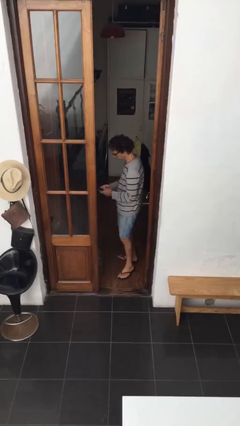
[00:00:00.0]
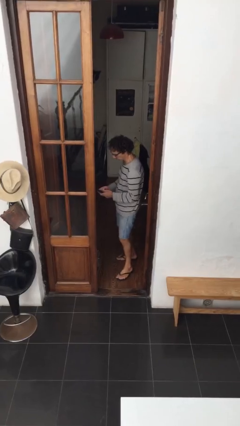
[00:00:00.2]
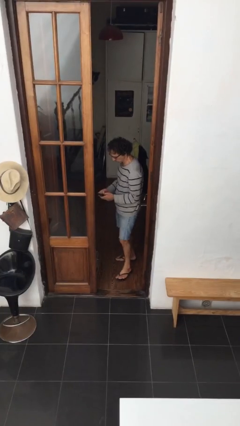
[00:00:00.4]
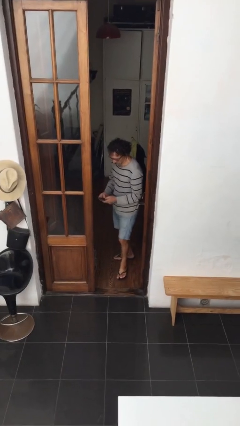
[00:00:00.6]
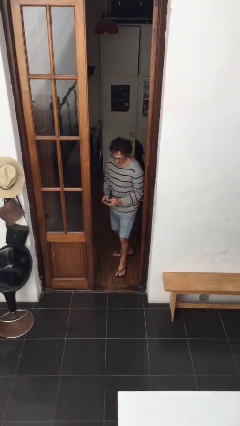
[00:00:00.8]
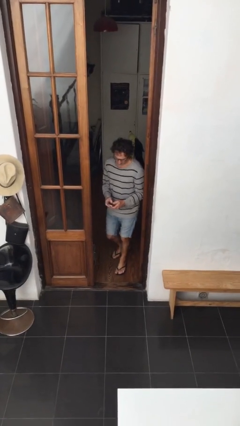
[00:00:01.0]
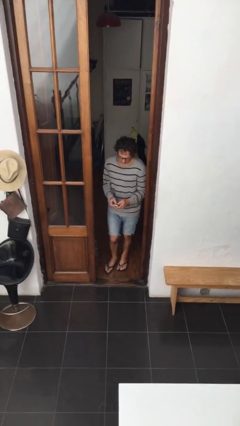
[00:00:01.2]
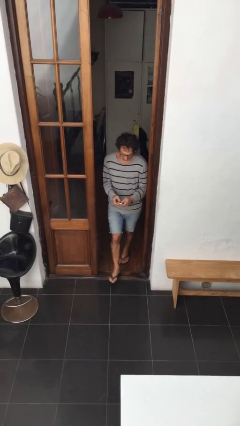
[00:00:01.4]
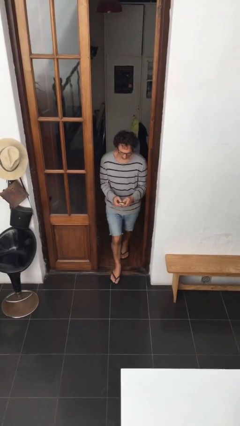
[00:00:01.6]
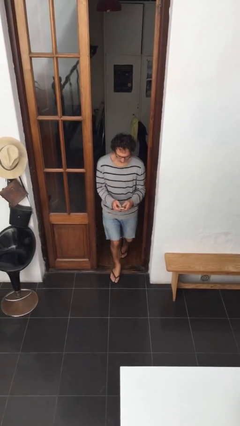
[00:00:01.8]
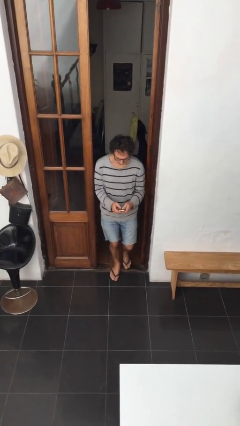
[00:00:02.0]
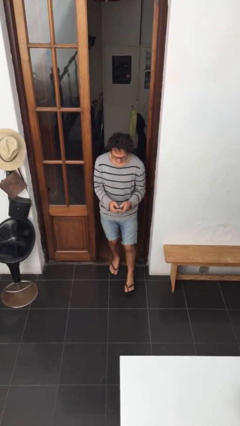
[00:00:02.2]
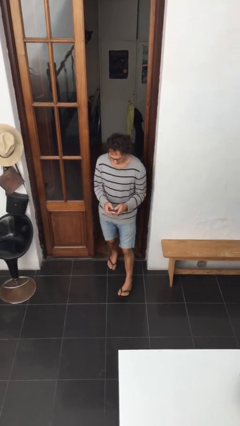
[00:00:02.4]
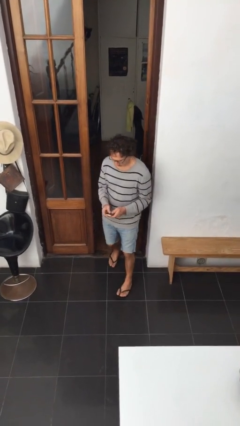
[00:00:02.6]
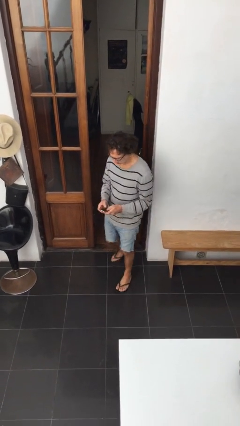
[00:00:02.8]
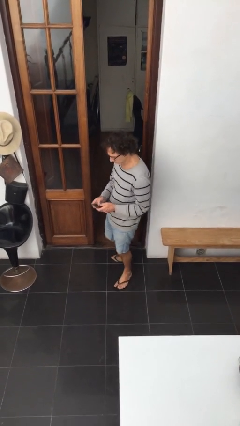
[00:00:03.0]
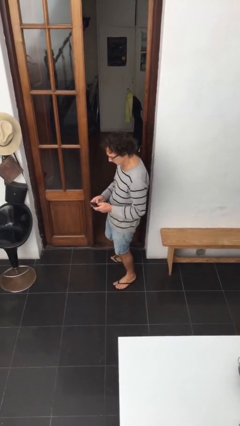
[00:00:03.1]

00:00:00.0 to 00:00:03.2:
person enters scene through structure

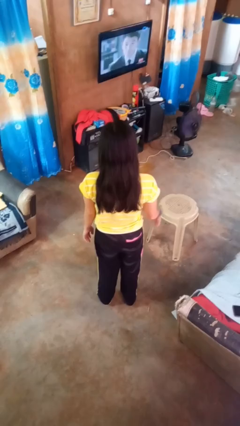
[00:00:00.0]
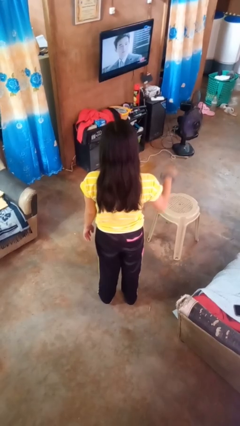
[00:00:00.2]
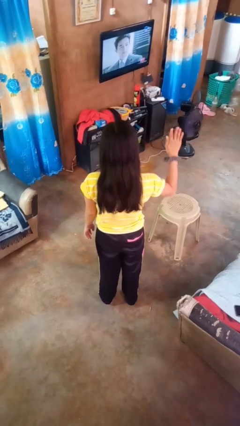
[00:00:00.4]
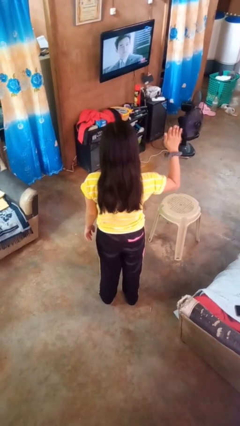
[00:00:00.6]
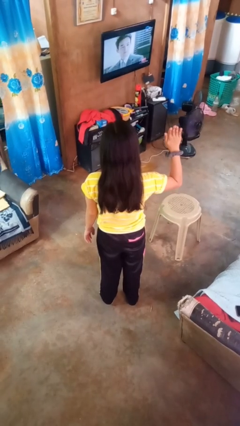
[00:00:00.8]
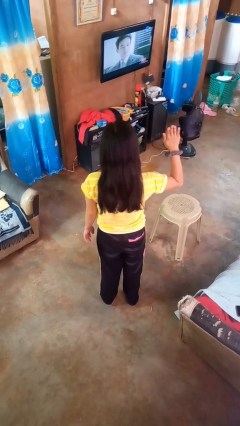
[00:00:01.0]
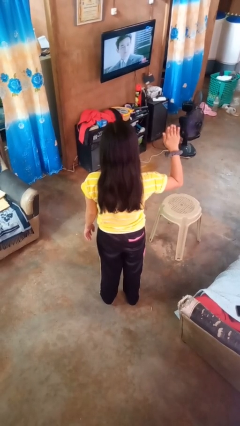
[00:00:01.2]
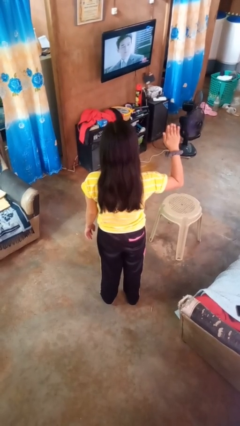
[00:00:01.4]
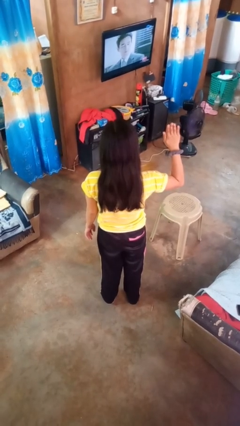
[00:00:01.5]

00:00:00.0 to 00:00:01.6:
person gestures number five

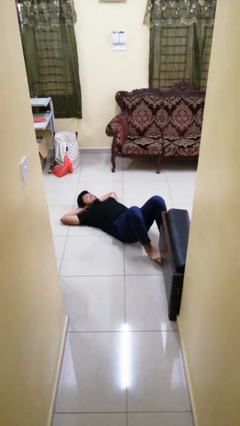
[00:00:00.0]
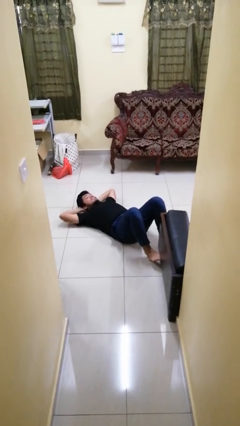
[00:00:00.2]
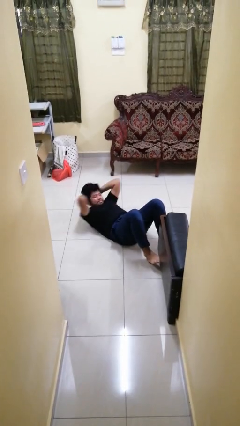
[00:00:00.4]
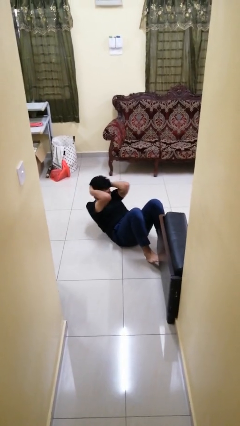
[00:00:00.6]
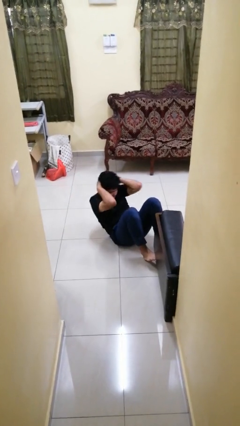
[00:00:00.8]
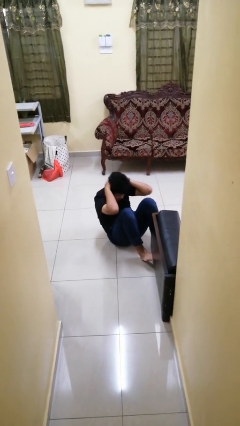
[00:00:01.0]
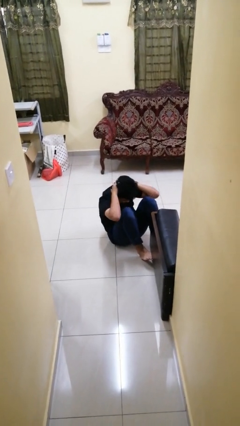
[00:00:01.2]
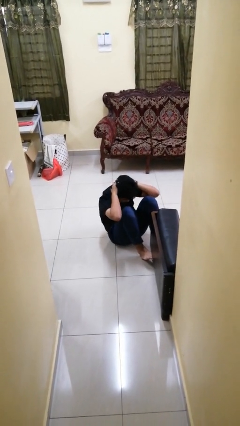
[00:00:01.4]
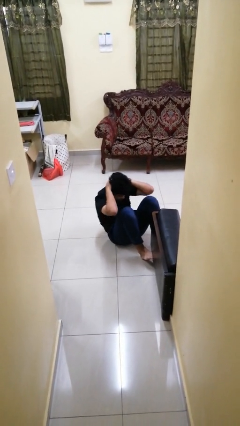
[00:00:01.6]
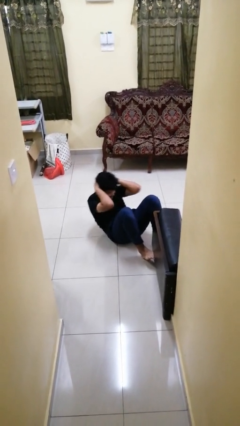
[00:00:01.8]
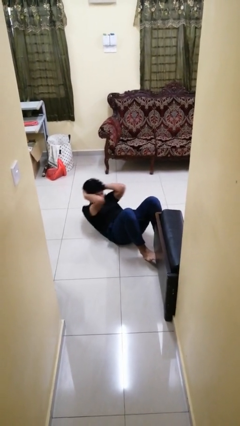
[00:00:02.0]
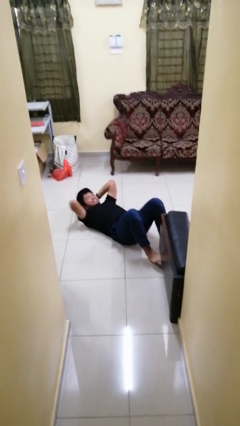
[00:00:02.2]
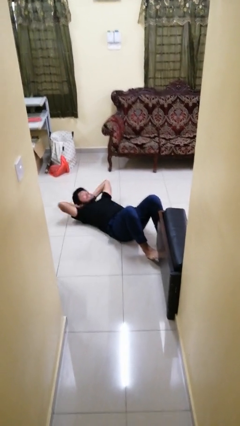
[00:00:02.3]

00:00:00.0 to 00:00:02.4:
person exercises with situp

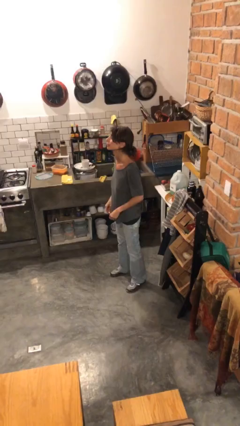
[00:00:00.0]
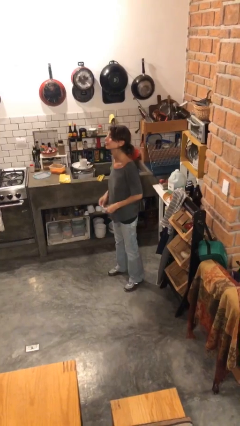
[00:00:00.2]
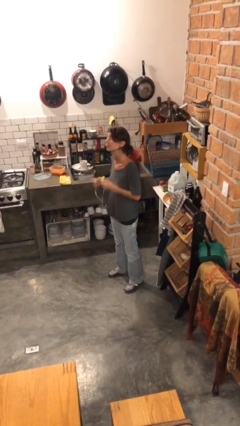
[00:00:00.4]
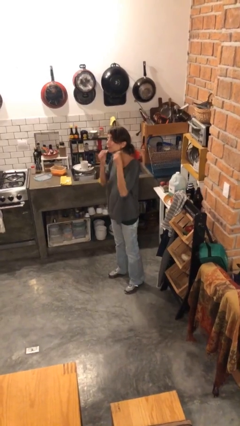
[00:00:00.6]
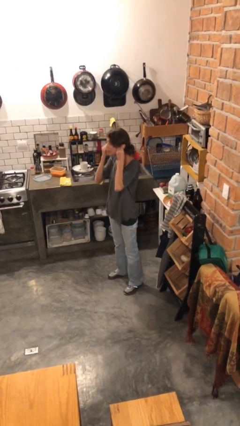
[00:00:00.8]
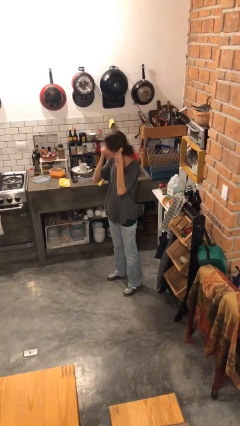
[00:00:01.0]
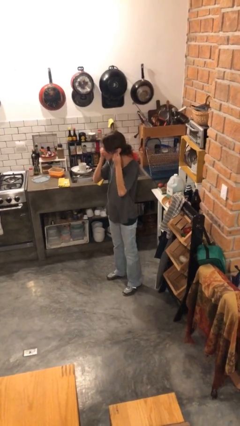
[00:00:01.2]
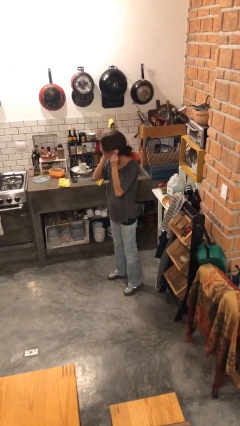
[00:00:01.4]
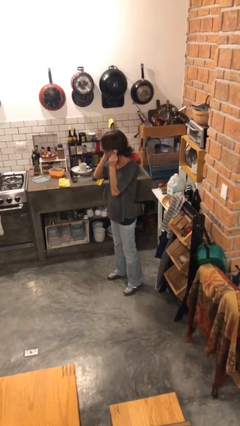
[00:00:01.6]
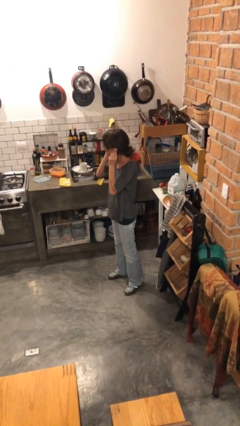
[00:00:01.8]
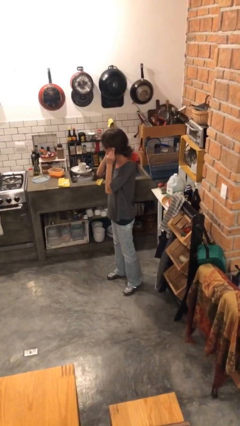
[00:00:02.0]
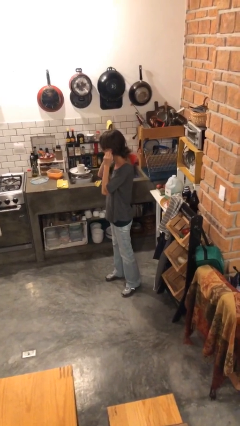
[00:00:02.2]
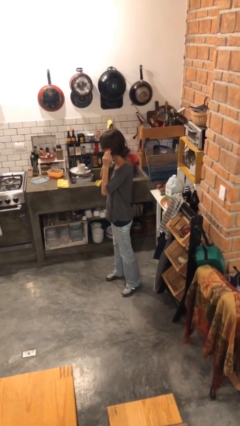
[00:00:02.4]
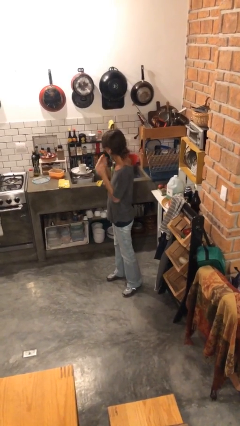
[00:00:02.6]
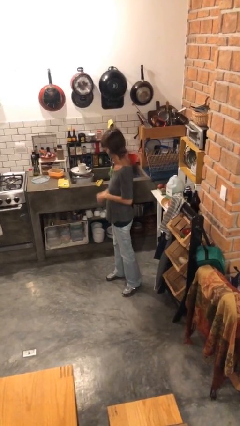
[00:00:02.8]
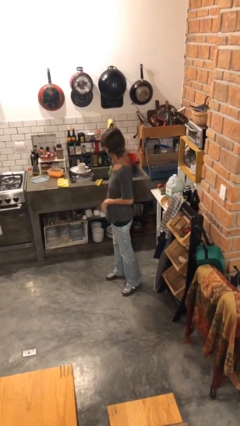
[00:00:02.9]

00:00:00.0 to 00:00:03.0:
person puts on headphones

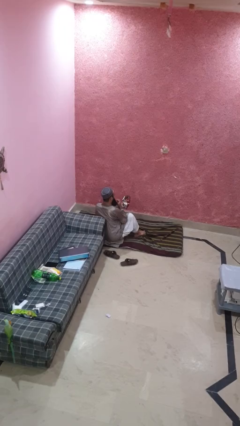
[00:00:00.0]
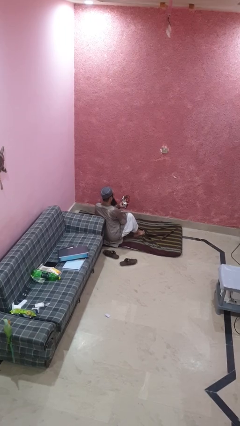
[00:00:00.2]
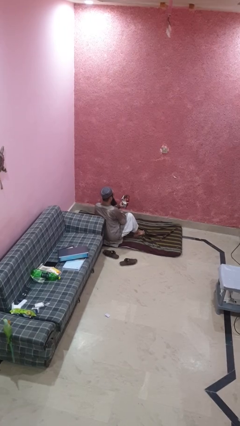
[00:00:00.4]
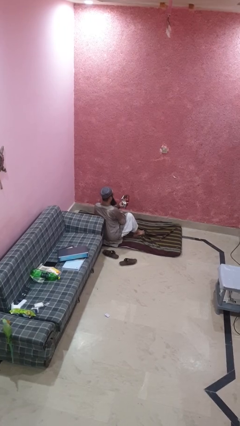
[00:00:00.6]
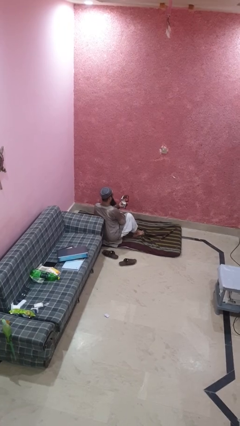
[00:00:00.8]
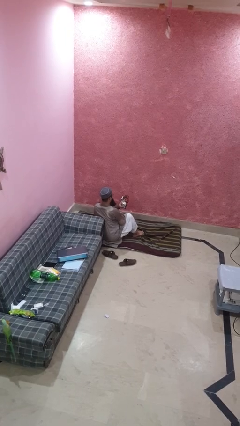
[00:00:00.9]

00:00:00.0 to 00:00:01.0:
person eats snack from bag

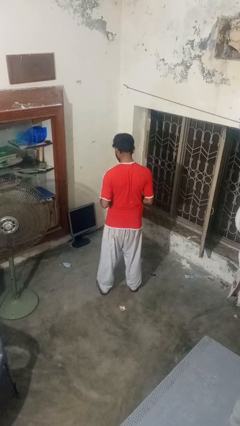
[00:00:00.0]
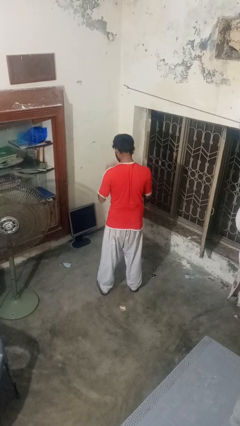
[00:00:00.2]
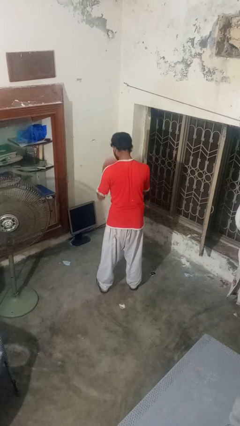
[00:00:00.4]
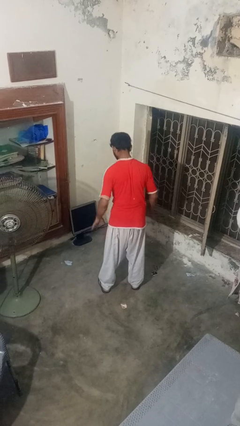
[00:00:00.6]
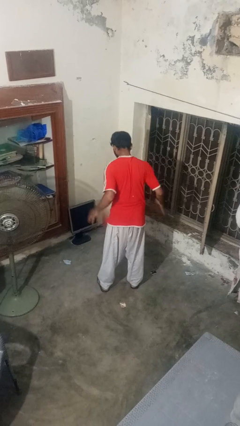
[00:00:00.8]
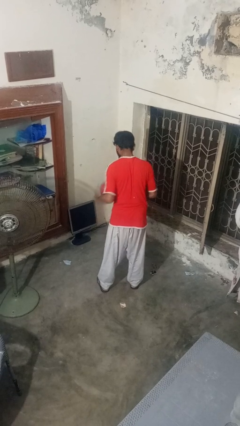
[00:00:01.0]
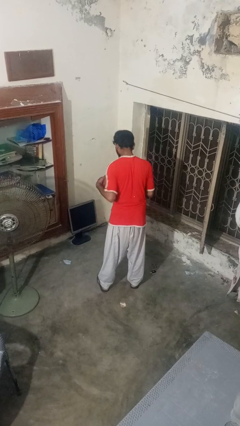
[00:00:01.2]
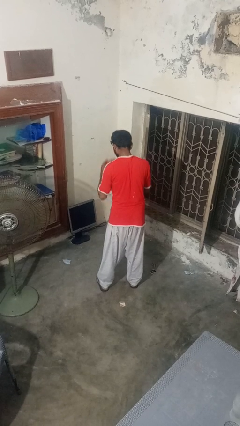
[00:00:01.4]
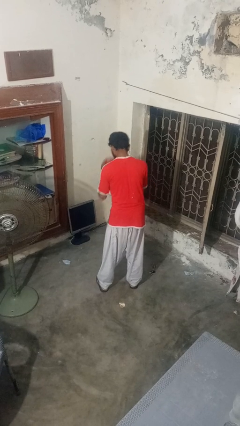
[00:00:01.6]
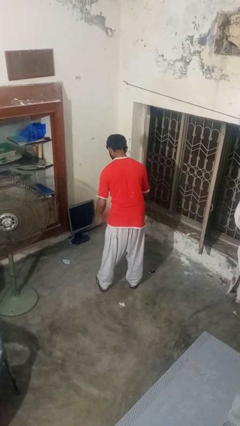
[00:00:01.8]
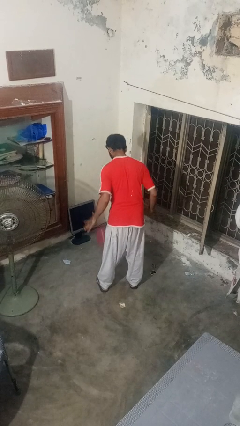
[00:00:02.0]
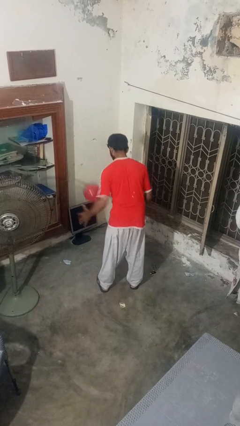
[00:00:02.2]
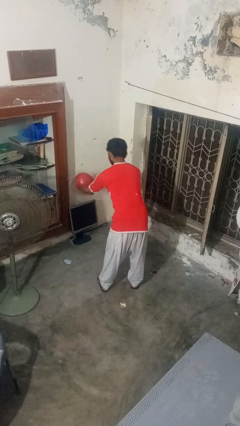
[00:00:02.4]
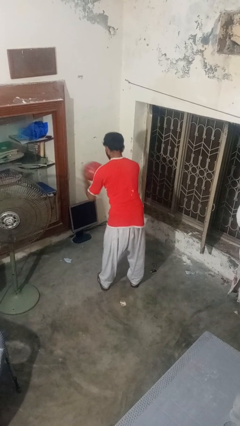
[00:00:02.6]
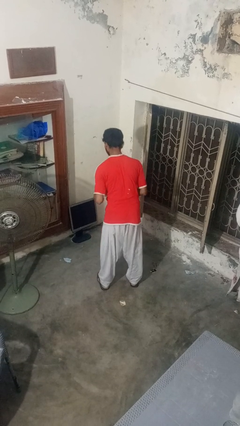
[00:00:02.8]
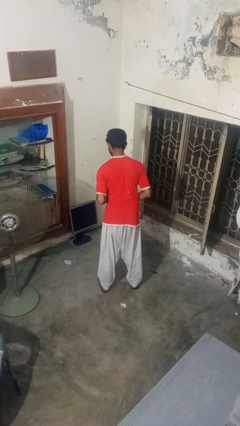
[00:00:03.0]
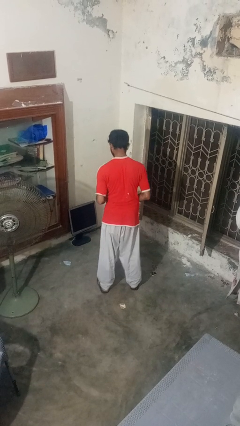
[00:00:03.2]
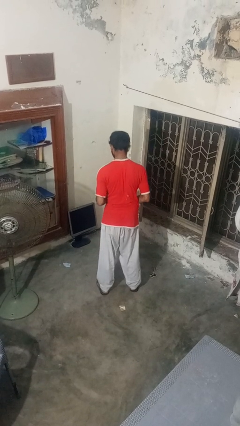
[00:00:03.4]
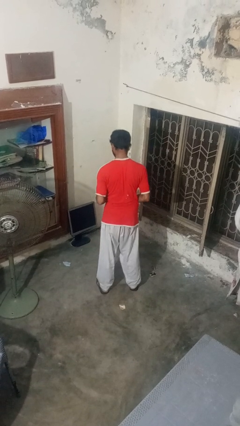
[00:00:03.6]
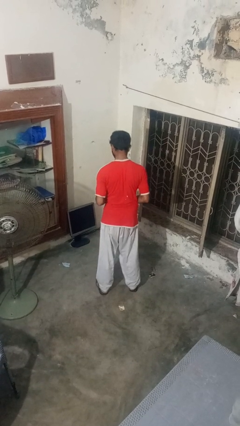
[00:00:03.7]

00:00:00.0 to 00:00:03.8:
person bounces ball on floor

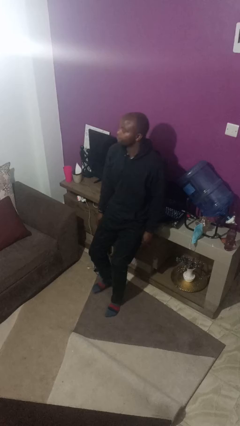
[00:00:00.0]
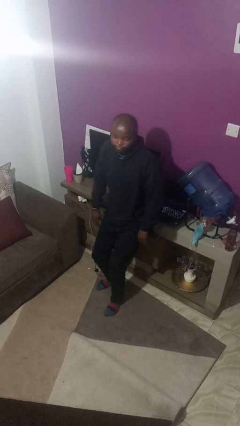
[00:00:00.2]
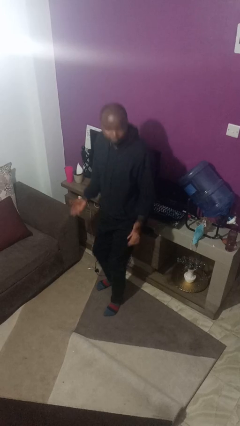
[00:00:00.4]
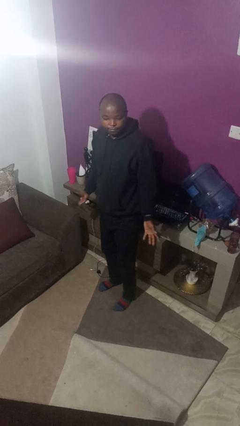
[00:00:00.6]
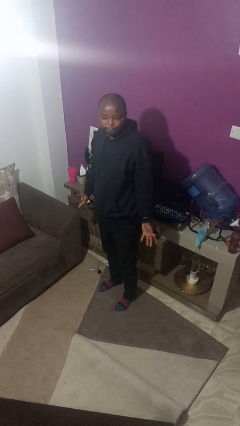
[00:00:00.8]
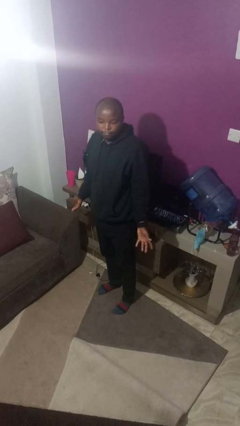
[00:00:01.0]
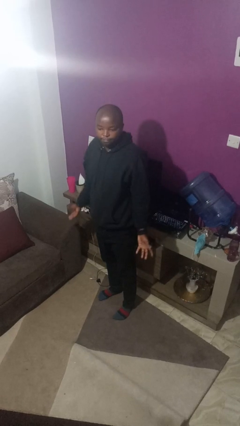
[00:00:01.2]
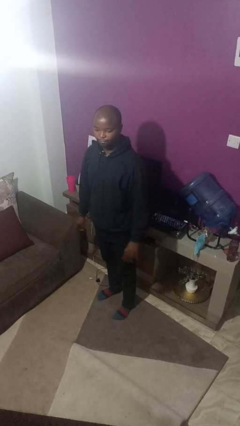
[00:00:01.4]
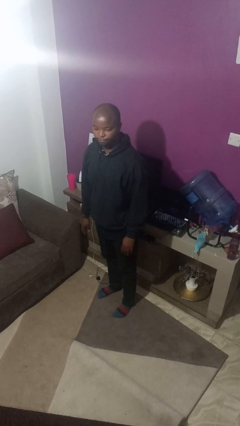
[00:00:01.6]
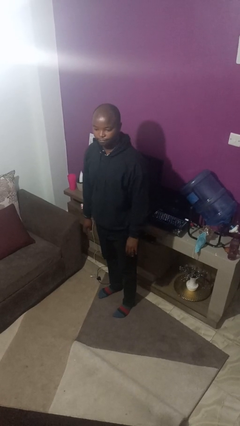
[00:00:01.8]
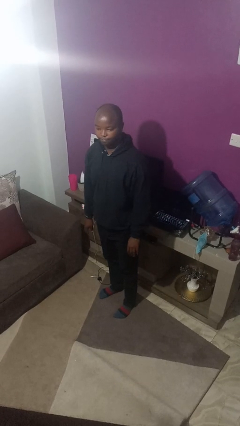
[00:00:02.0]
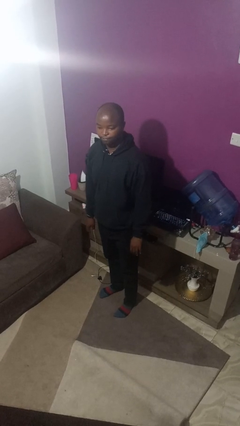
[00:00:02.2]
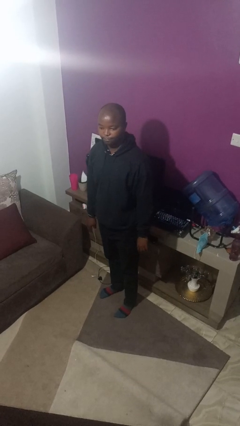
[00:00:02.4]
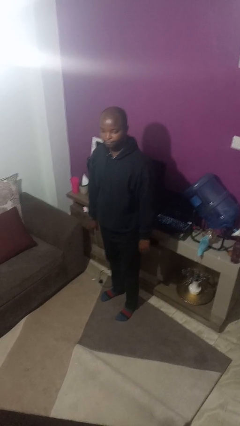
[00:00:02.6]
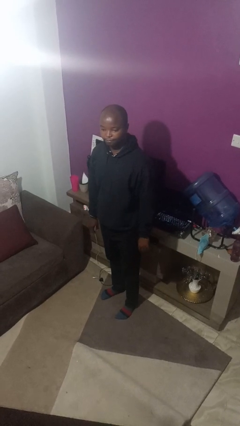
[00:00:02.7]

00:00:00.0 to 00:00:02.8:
person shrugs
